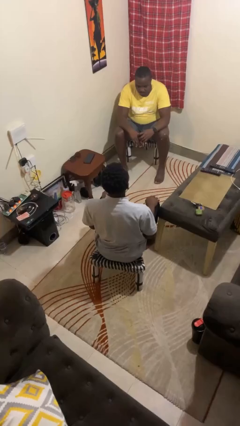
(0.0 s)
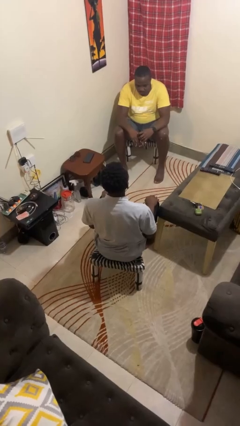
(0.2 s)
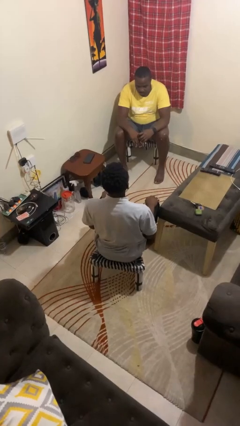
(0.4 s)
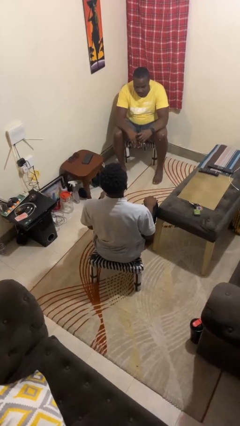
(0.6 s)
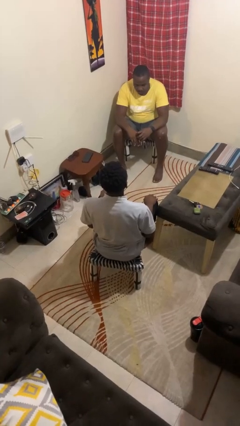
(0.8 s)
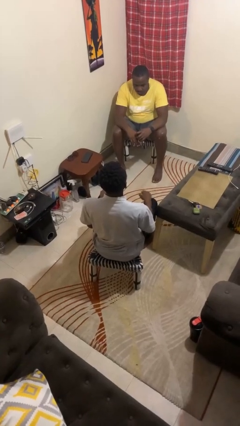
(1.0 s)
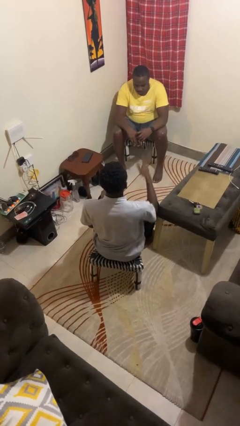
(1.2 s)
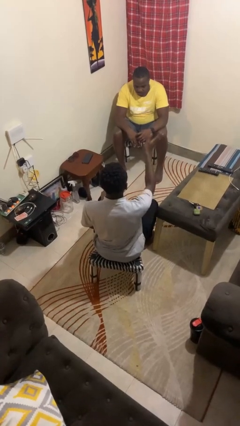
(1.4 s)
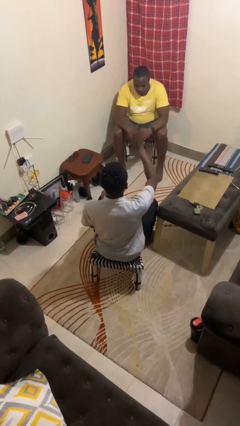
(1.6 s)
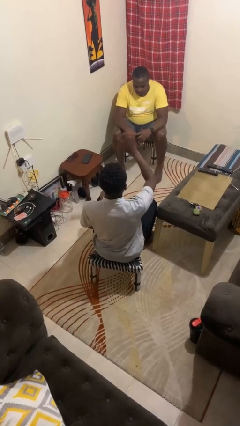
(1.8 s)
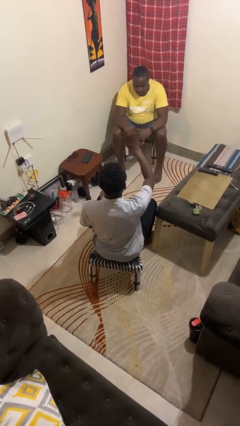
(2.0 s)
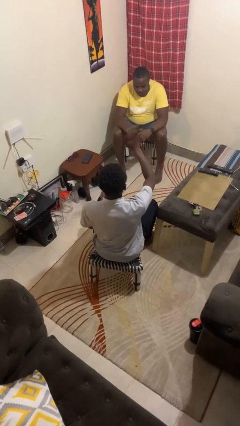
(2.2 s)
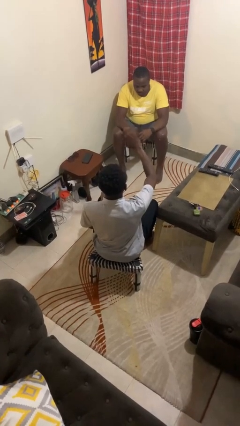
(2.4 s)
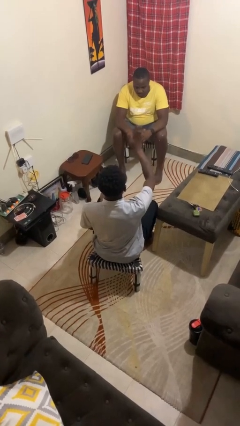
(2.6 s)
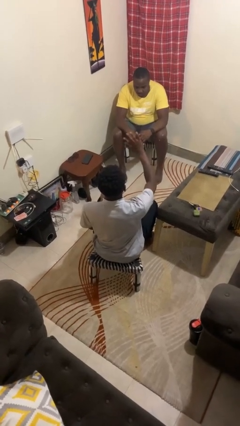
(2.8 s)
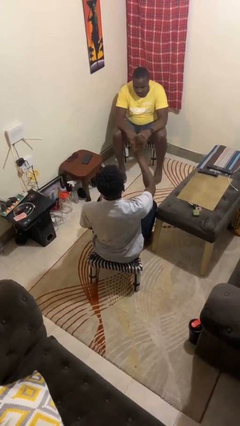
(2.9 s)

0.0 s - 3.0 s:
person waves at person

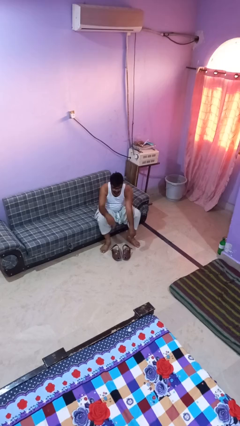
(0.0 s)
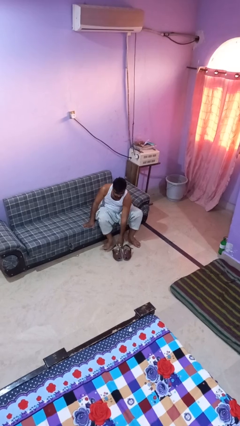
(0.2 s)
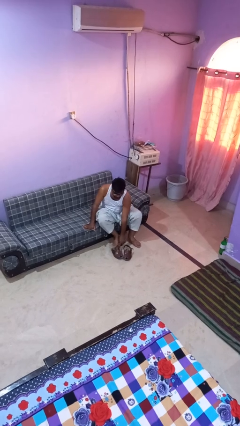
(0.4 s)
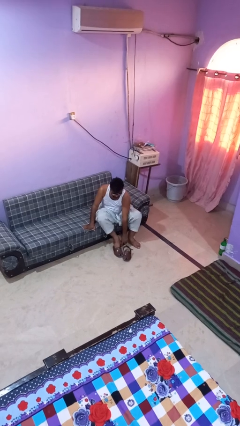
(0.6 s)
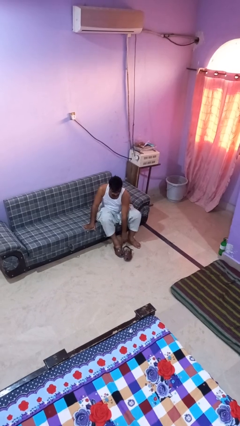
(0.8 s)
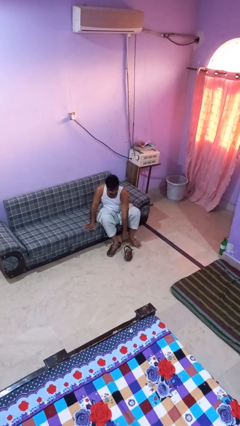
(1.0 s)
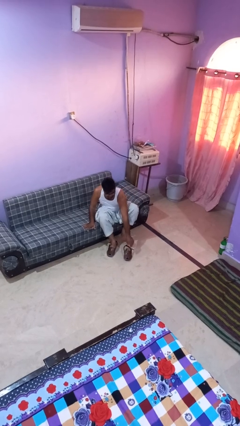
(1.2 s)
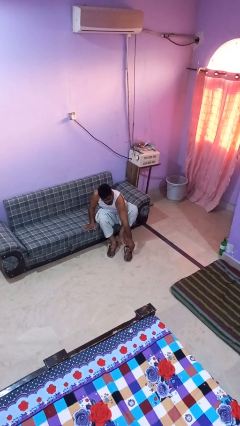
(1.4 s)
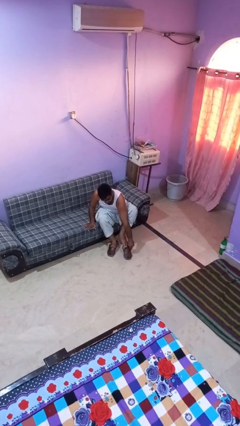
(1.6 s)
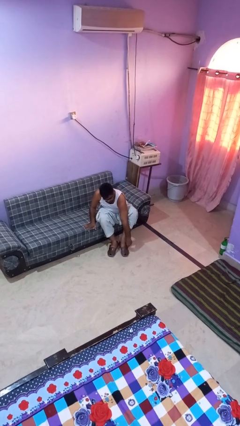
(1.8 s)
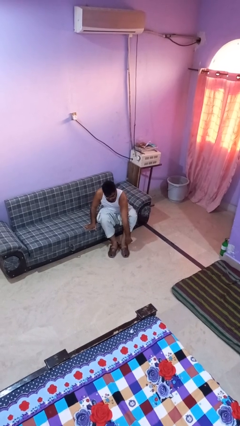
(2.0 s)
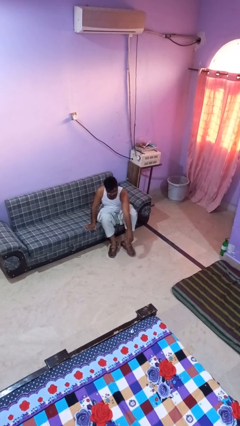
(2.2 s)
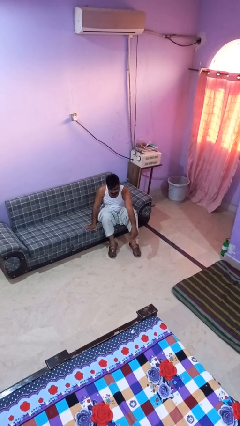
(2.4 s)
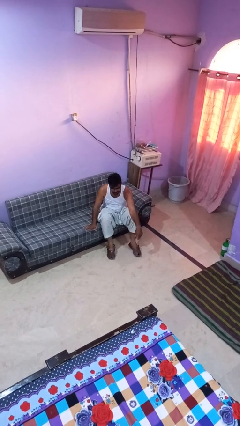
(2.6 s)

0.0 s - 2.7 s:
person puts on shoes

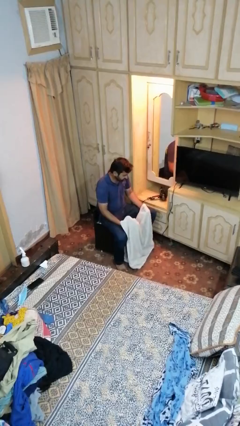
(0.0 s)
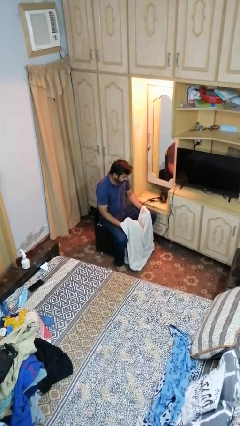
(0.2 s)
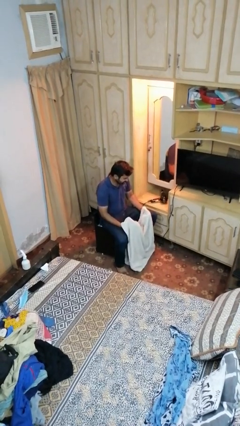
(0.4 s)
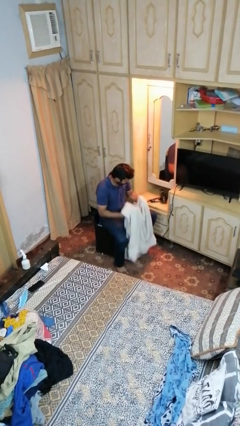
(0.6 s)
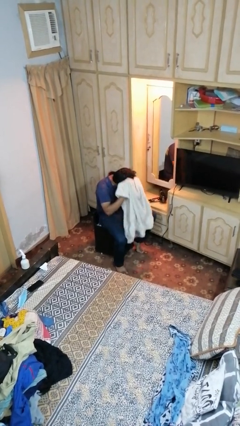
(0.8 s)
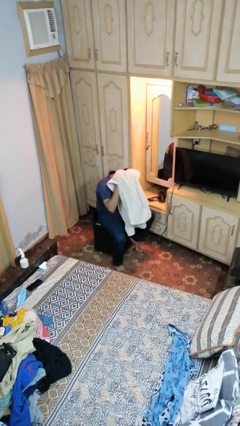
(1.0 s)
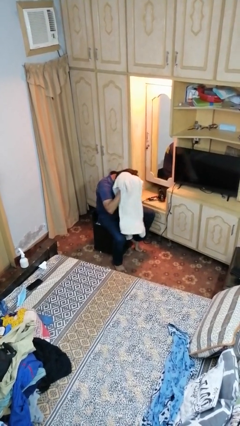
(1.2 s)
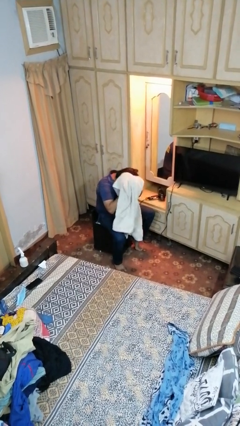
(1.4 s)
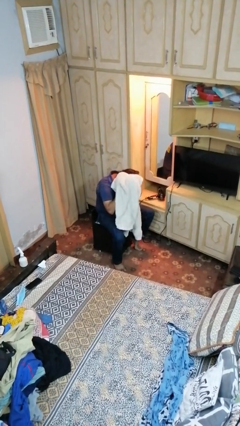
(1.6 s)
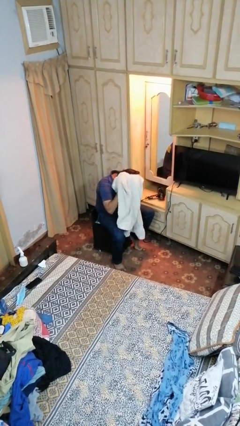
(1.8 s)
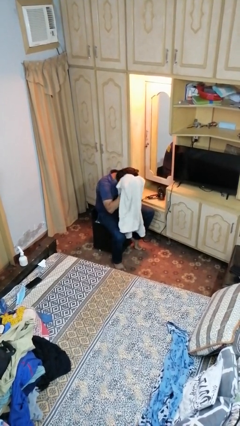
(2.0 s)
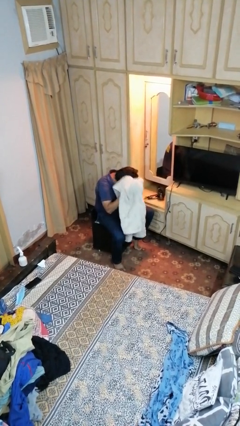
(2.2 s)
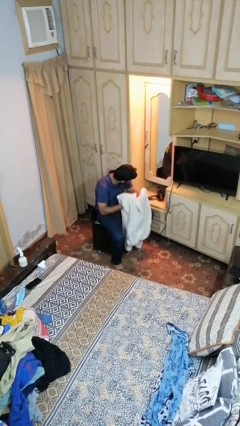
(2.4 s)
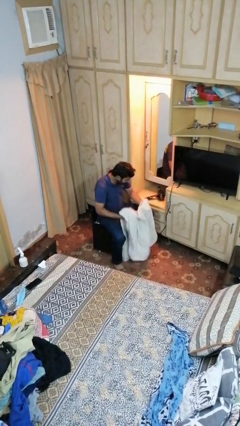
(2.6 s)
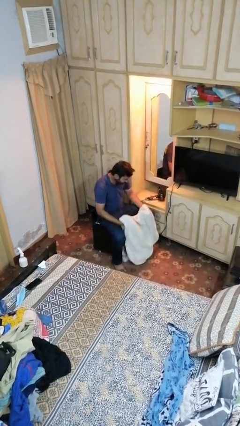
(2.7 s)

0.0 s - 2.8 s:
person dries hair with towel

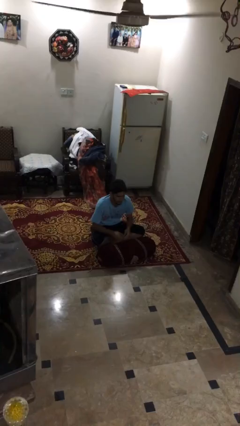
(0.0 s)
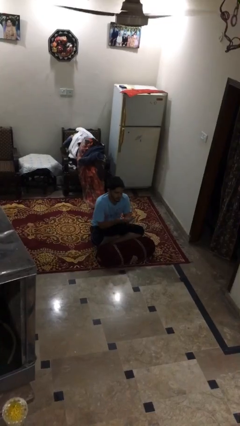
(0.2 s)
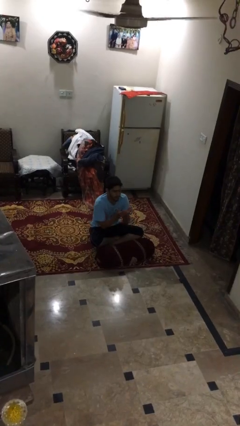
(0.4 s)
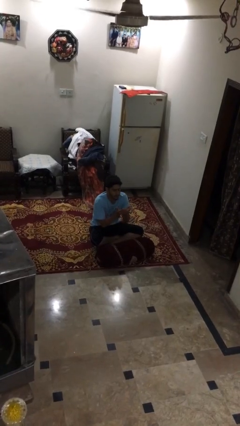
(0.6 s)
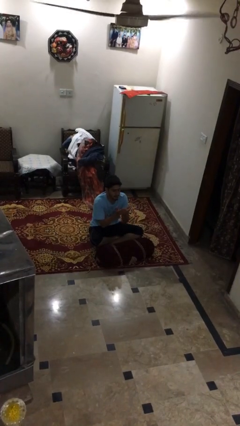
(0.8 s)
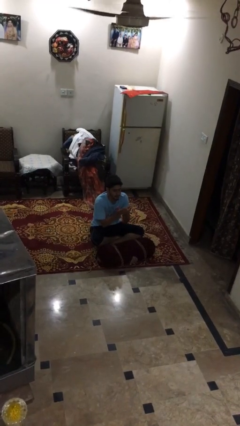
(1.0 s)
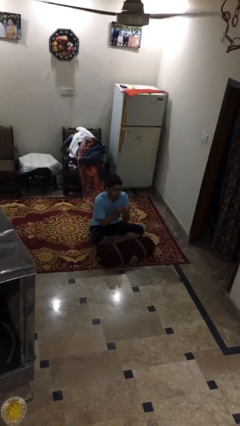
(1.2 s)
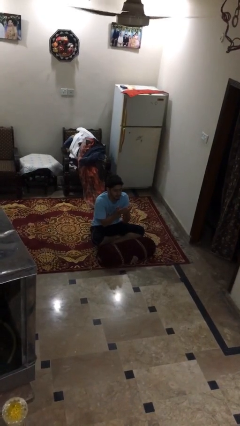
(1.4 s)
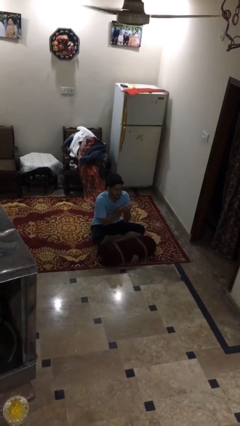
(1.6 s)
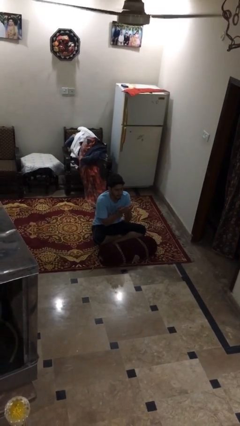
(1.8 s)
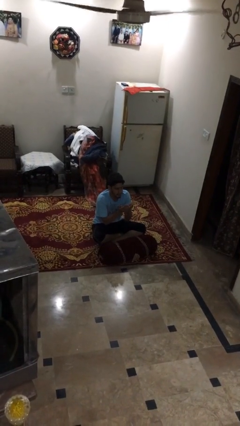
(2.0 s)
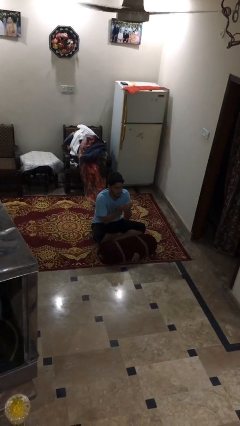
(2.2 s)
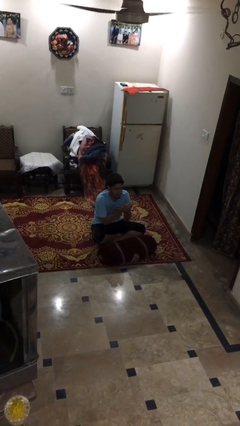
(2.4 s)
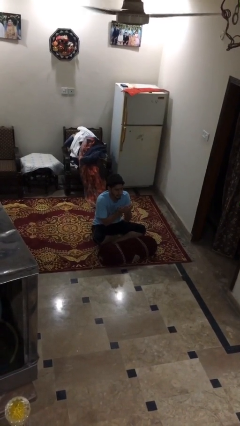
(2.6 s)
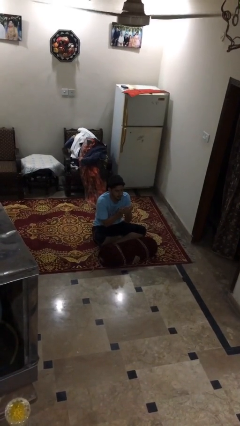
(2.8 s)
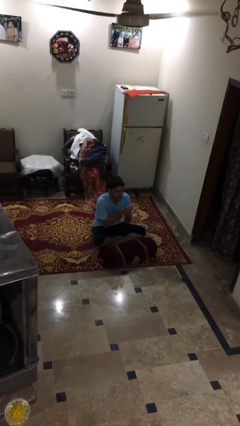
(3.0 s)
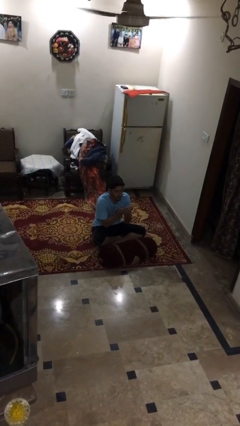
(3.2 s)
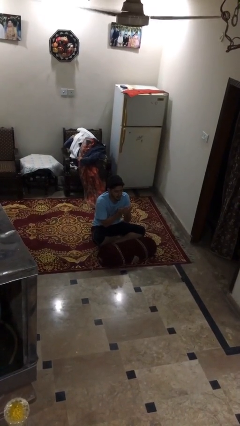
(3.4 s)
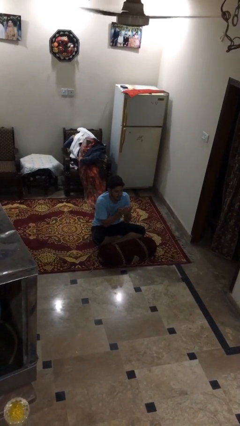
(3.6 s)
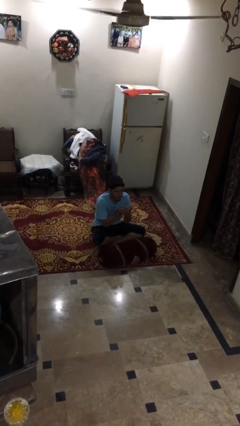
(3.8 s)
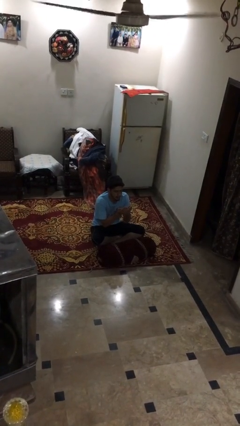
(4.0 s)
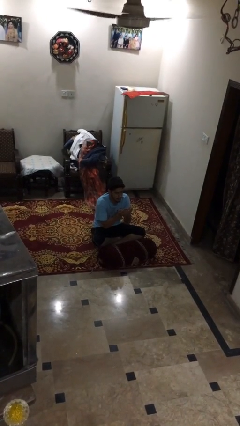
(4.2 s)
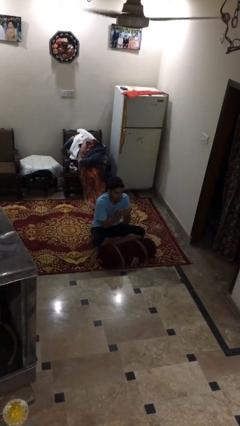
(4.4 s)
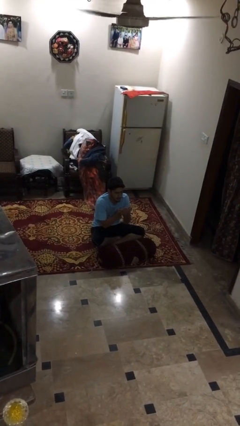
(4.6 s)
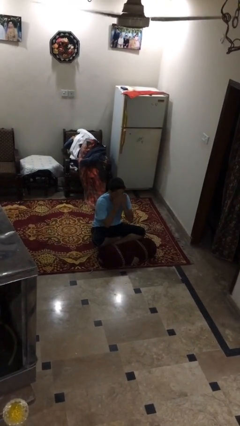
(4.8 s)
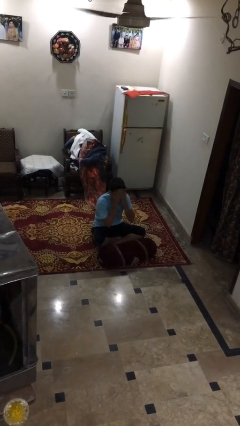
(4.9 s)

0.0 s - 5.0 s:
person prays

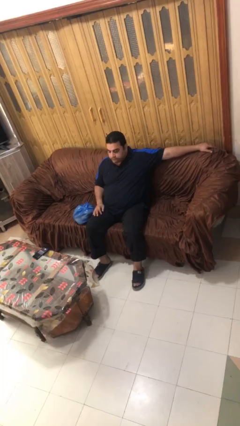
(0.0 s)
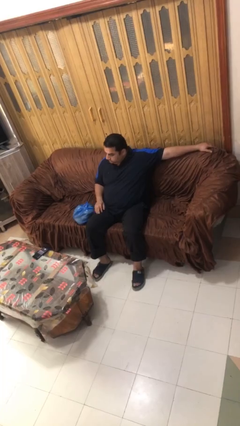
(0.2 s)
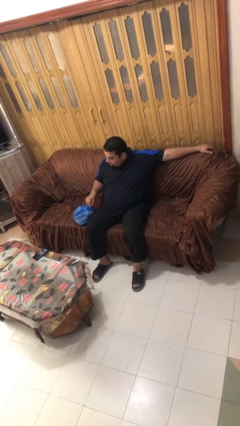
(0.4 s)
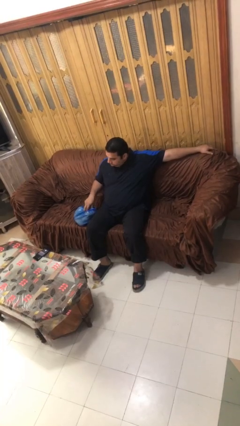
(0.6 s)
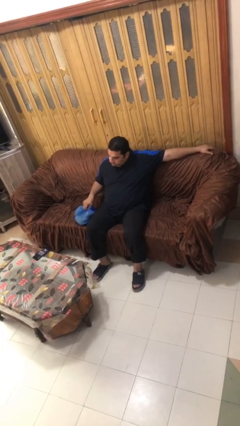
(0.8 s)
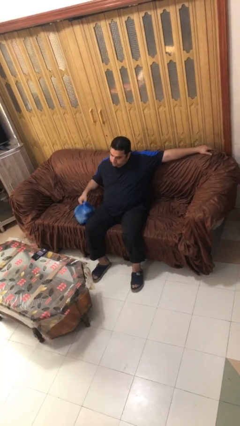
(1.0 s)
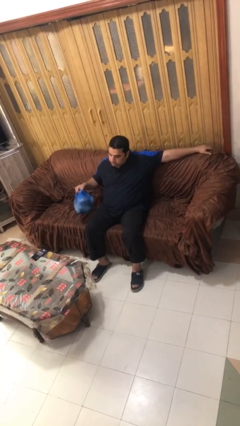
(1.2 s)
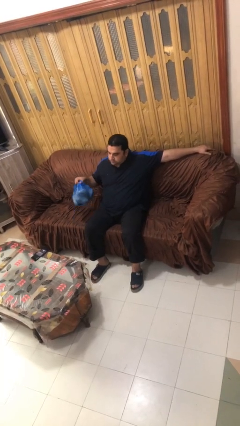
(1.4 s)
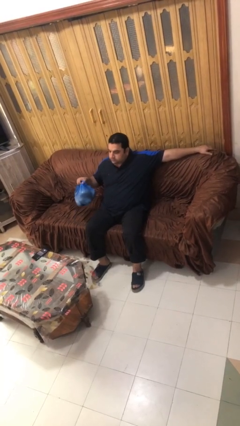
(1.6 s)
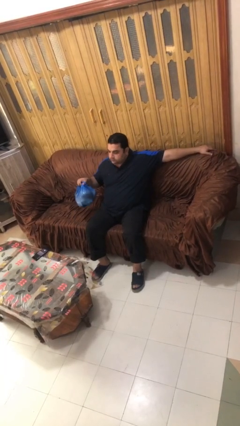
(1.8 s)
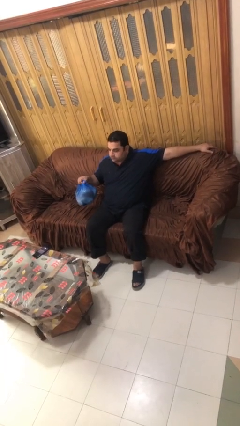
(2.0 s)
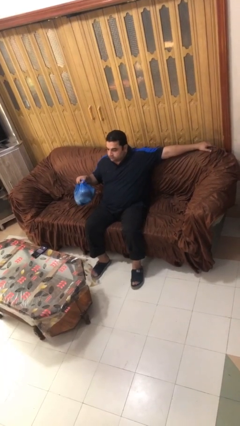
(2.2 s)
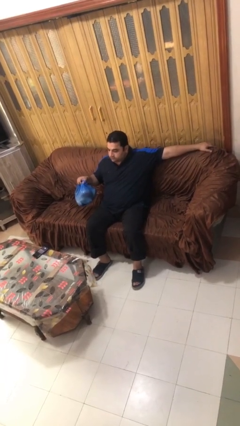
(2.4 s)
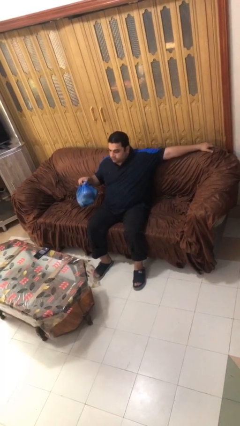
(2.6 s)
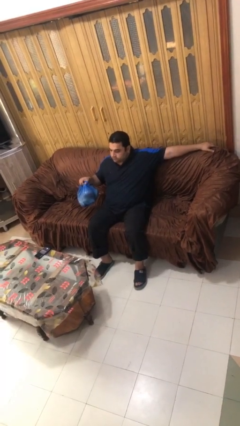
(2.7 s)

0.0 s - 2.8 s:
person picks up object from couch

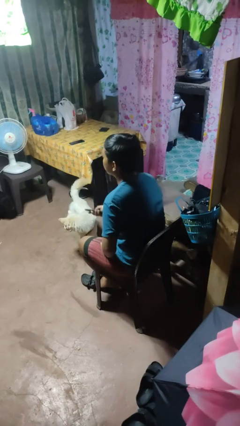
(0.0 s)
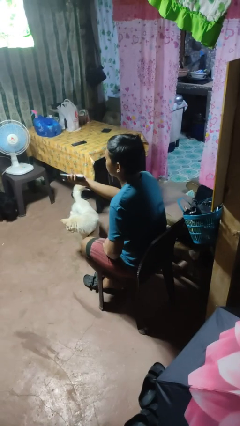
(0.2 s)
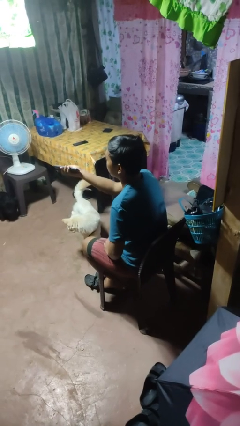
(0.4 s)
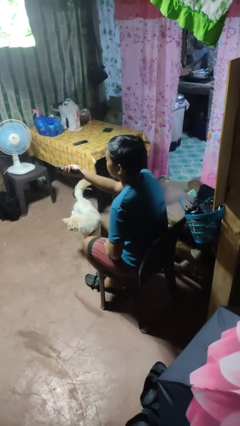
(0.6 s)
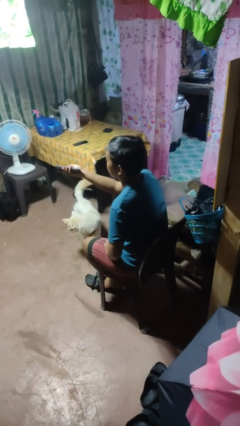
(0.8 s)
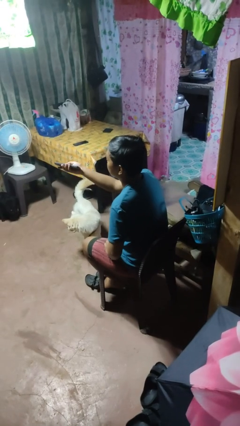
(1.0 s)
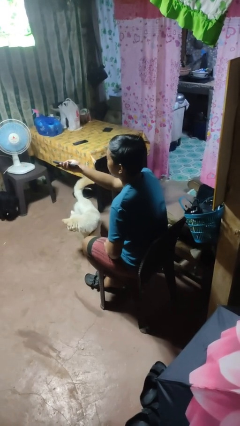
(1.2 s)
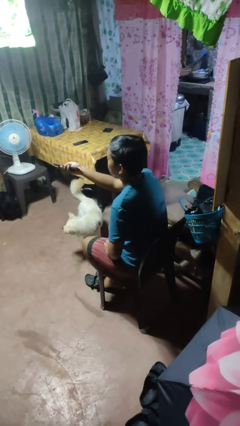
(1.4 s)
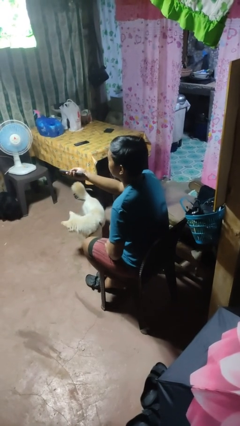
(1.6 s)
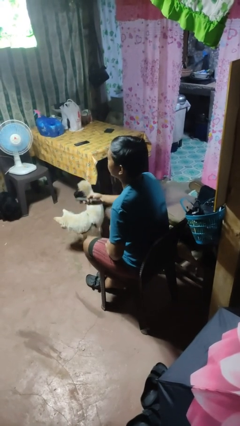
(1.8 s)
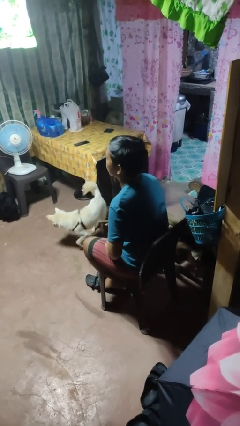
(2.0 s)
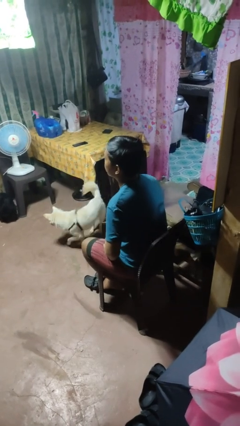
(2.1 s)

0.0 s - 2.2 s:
person uses television remote
